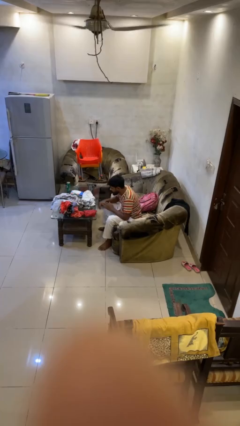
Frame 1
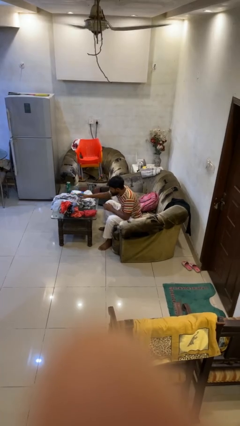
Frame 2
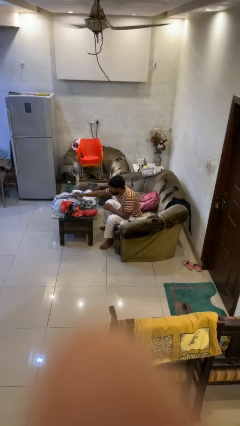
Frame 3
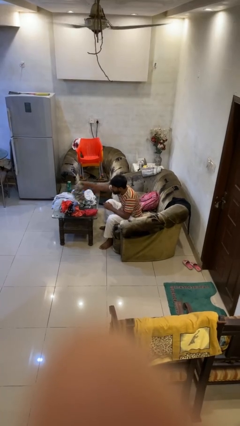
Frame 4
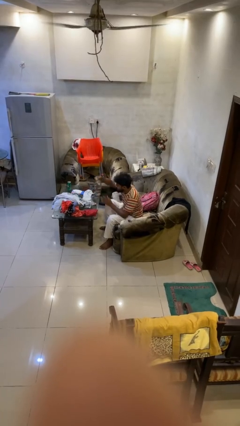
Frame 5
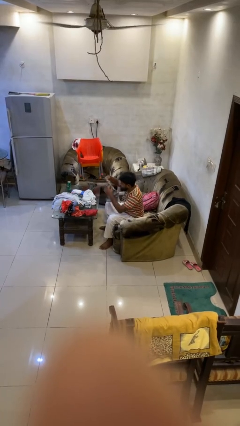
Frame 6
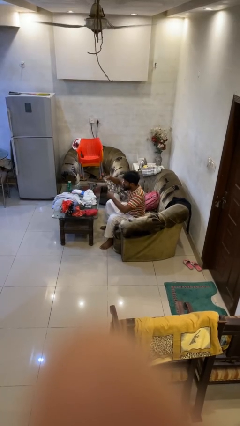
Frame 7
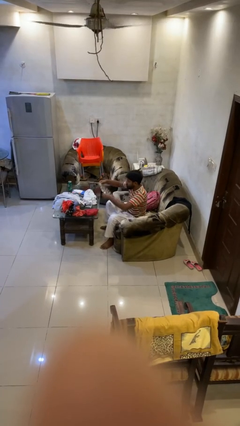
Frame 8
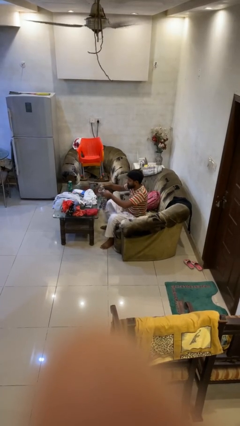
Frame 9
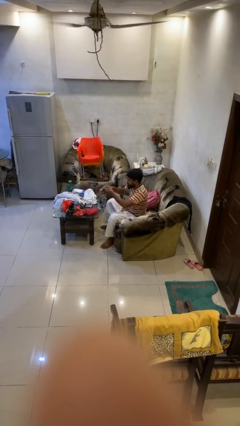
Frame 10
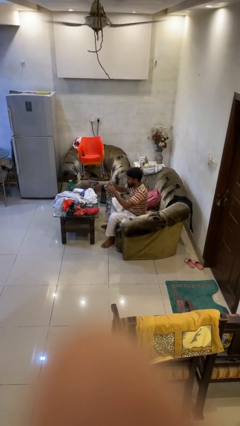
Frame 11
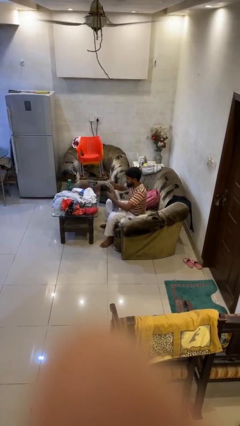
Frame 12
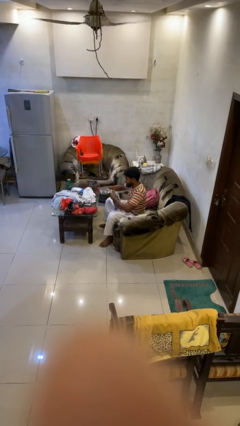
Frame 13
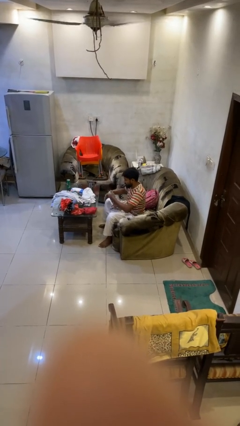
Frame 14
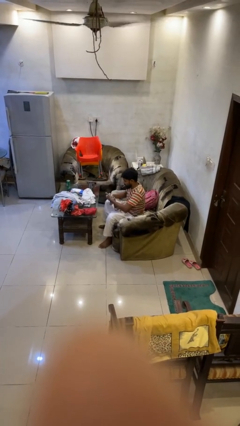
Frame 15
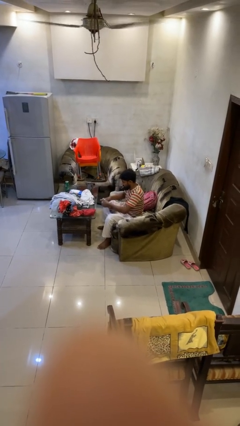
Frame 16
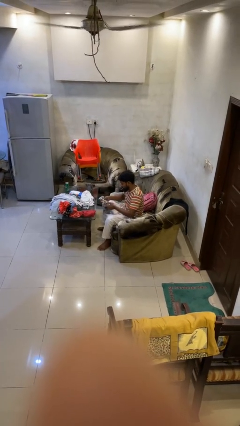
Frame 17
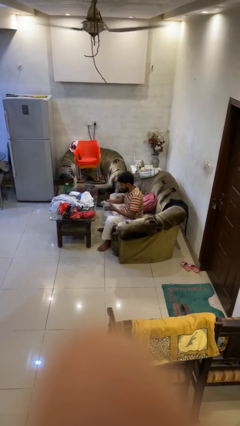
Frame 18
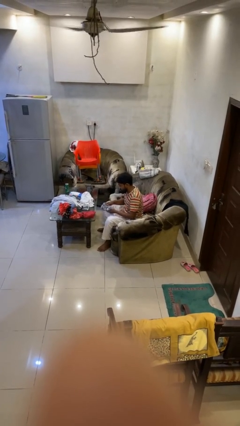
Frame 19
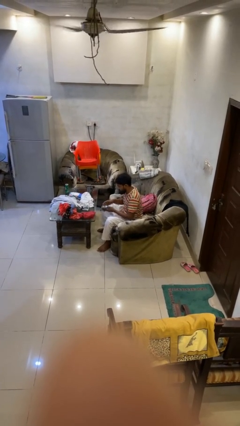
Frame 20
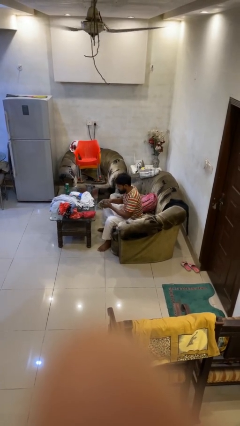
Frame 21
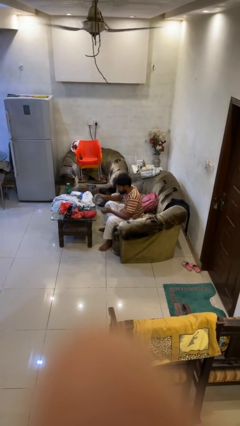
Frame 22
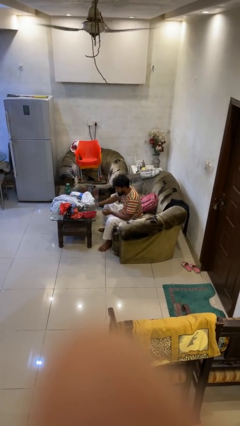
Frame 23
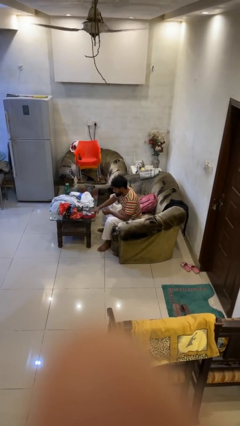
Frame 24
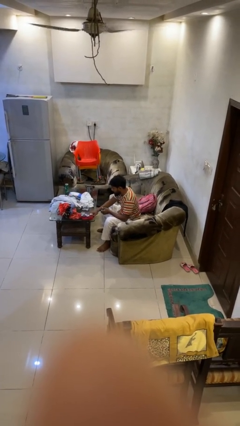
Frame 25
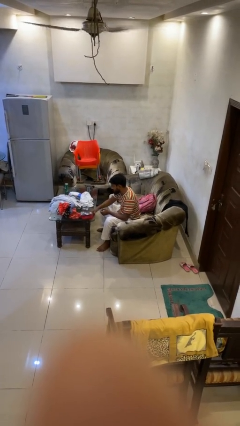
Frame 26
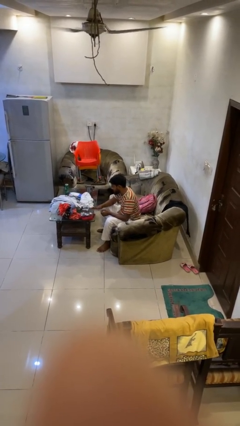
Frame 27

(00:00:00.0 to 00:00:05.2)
person folds pants

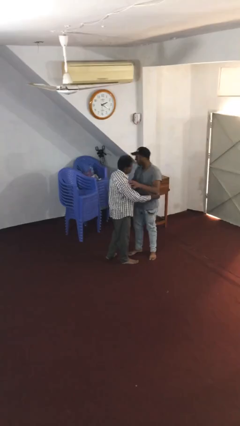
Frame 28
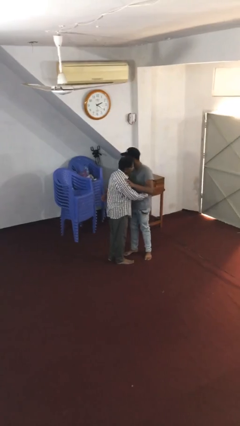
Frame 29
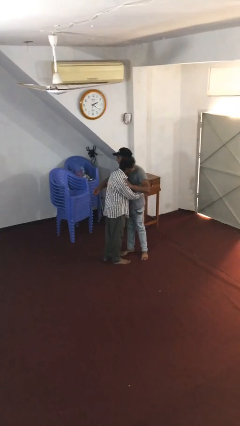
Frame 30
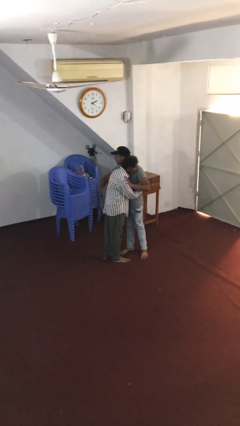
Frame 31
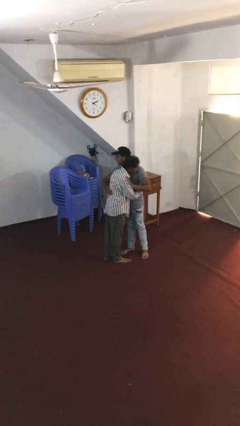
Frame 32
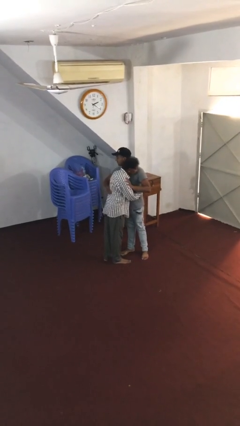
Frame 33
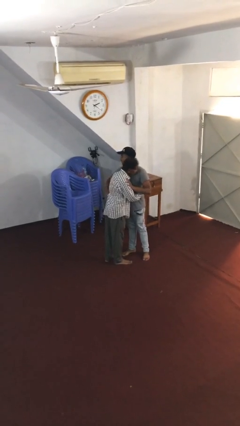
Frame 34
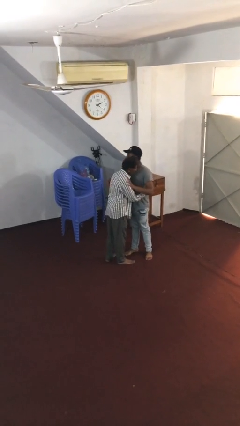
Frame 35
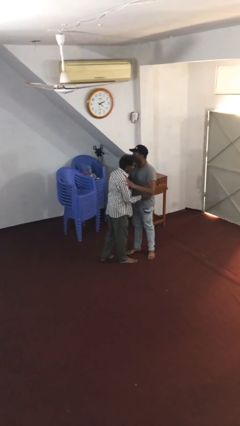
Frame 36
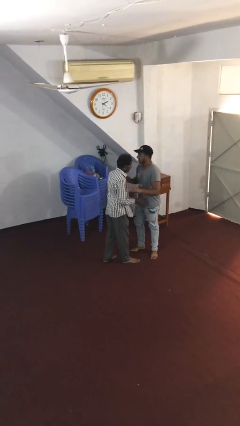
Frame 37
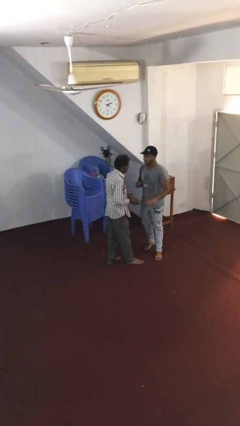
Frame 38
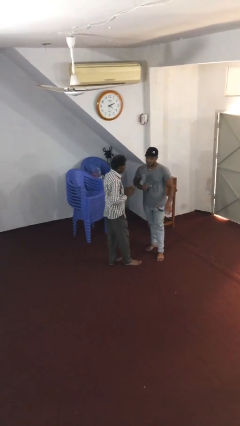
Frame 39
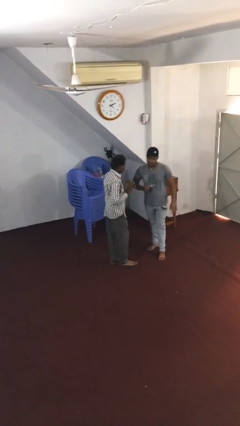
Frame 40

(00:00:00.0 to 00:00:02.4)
person embraces person

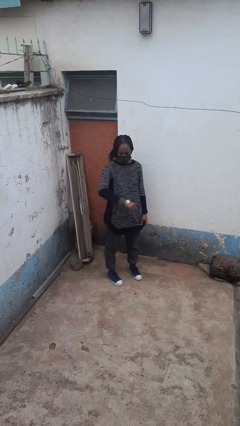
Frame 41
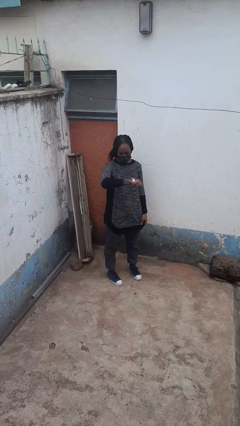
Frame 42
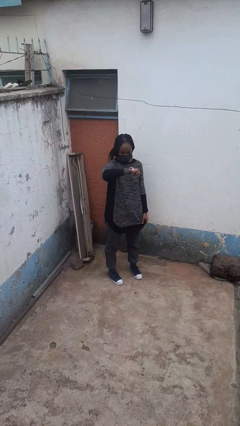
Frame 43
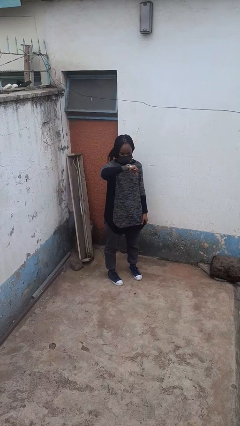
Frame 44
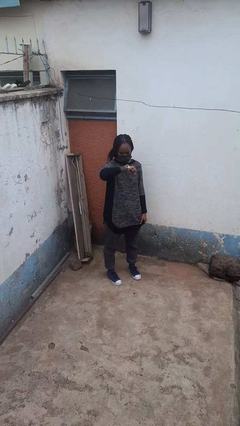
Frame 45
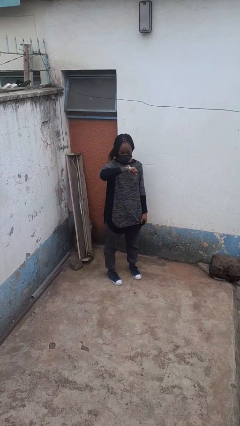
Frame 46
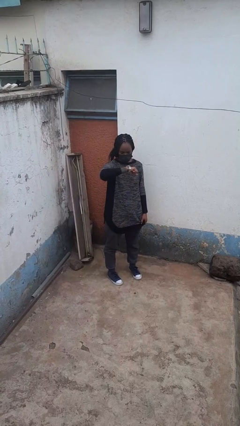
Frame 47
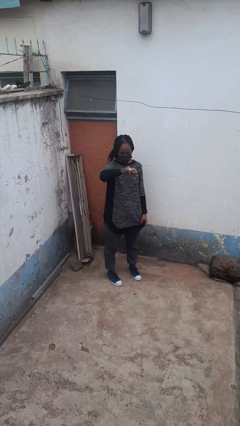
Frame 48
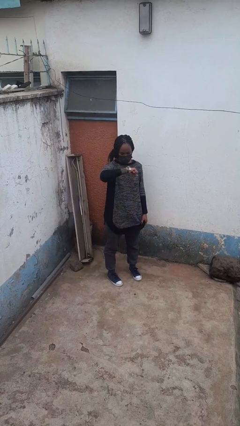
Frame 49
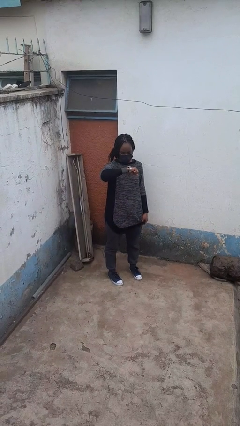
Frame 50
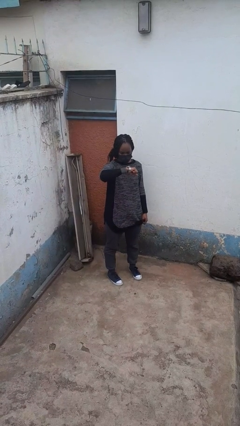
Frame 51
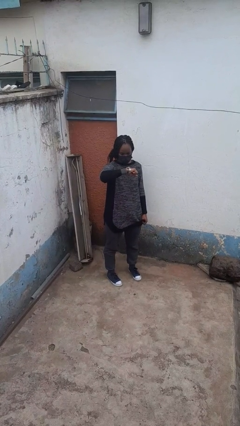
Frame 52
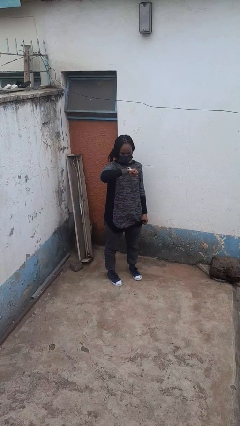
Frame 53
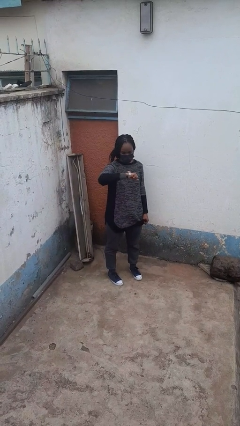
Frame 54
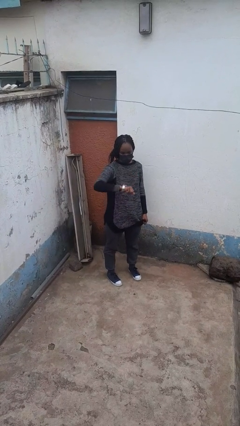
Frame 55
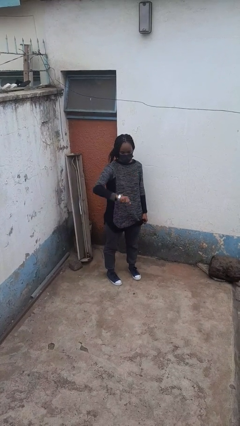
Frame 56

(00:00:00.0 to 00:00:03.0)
person looks at wristwatch

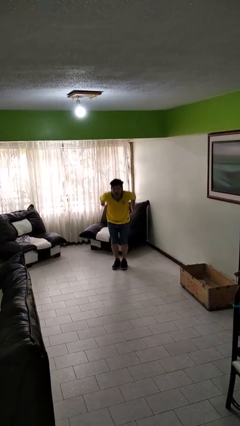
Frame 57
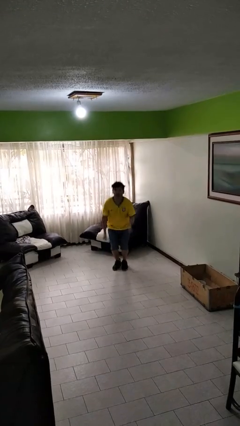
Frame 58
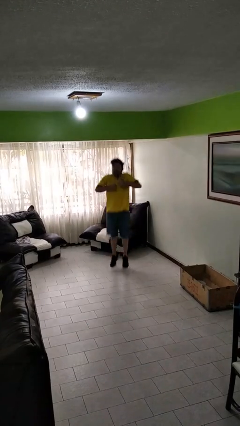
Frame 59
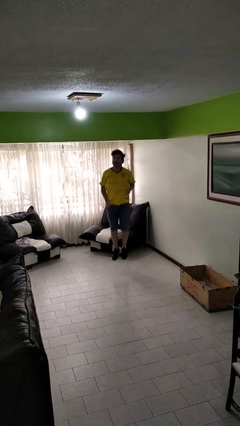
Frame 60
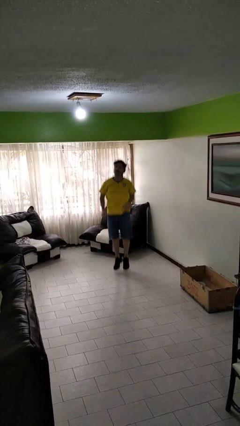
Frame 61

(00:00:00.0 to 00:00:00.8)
person jumps

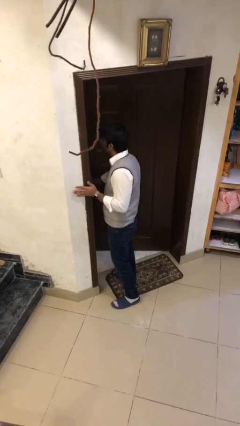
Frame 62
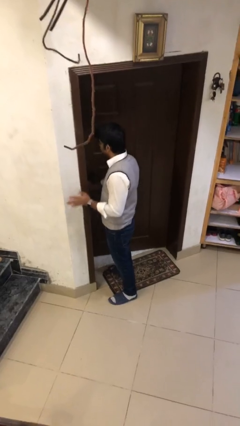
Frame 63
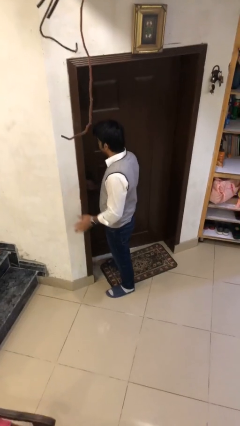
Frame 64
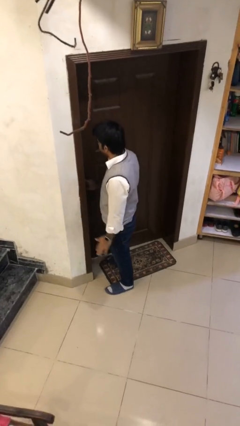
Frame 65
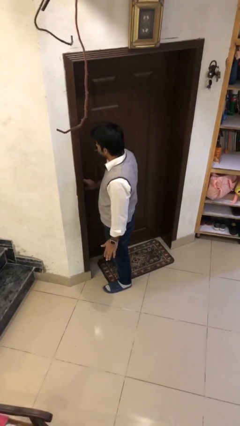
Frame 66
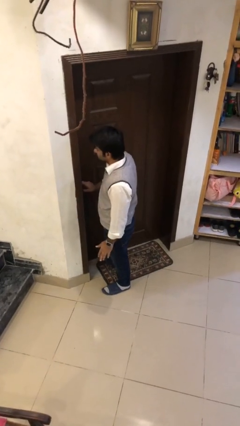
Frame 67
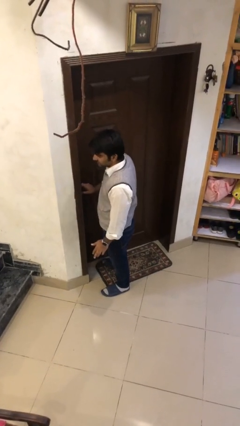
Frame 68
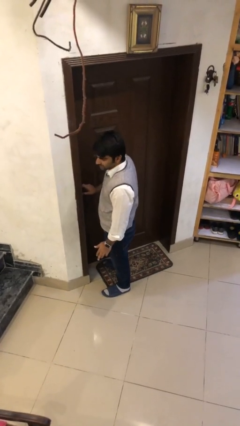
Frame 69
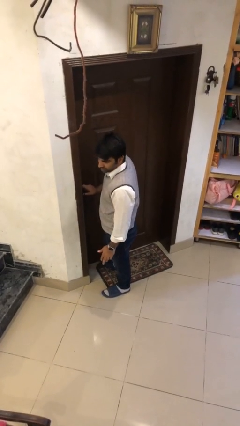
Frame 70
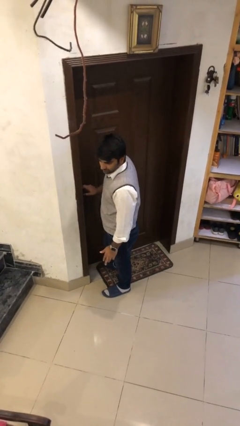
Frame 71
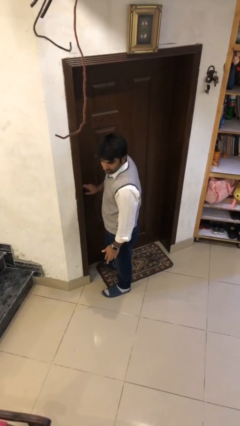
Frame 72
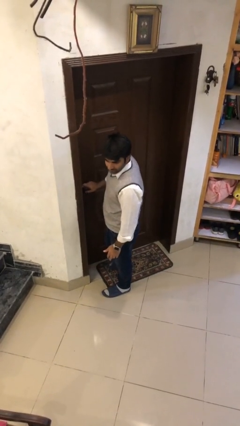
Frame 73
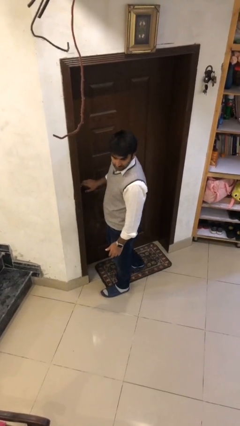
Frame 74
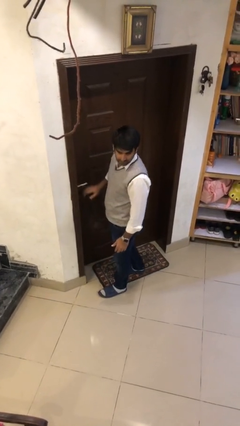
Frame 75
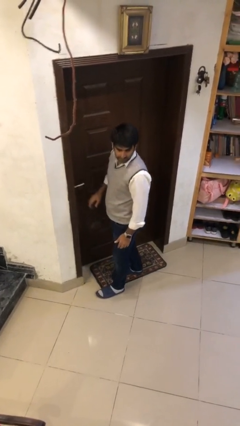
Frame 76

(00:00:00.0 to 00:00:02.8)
person closes facility door

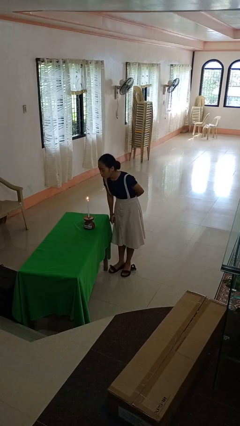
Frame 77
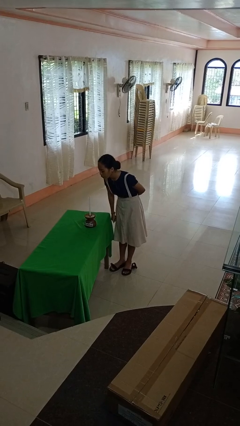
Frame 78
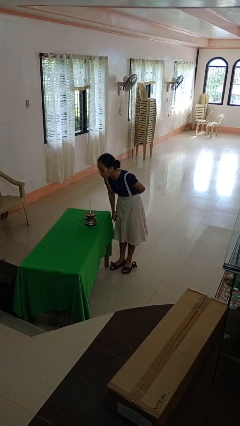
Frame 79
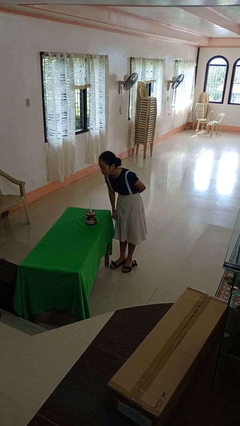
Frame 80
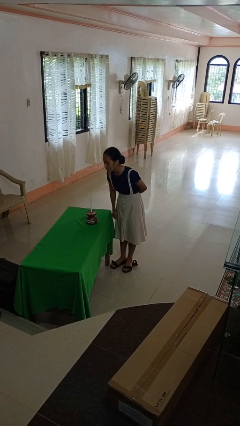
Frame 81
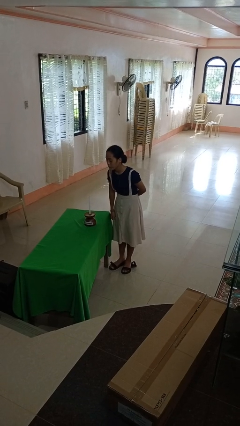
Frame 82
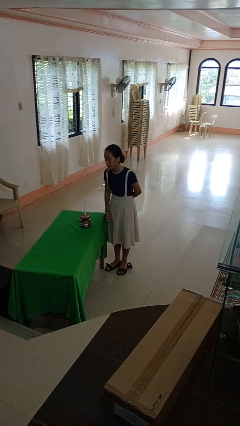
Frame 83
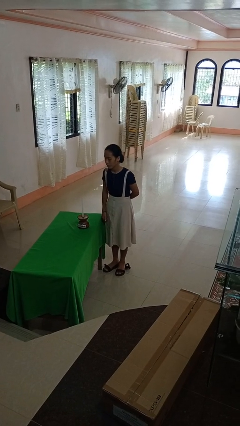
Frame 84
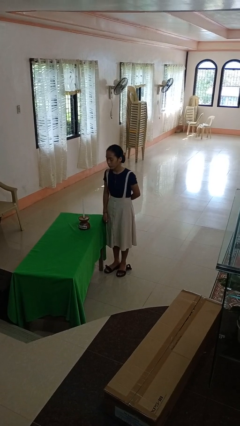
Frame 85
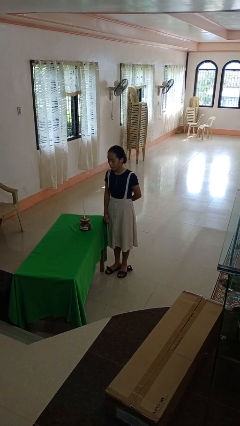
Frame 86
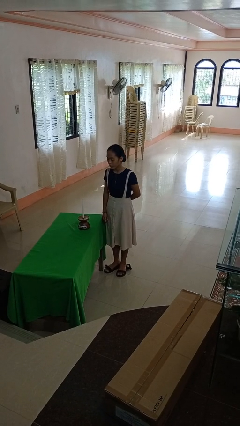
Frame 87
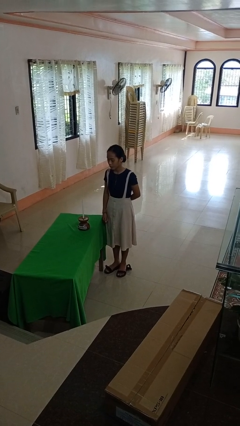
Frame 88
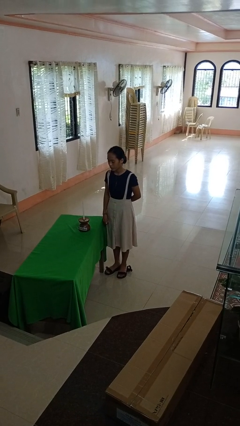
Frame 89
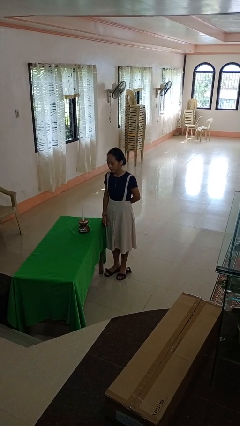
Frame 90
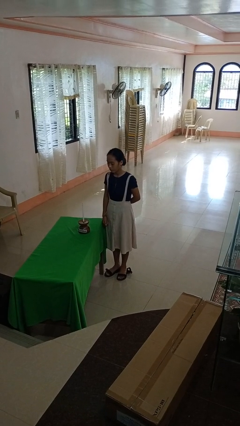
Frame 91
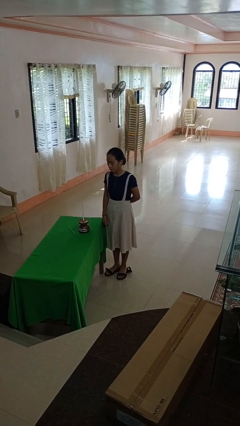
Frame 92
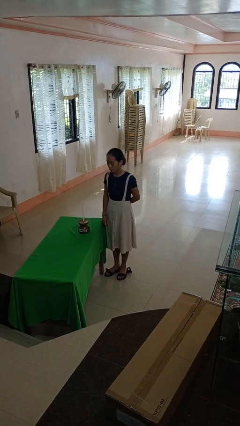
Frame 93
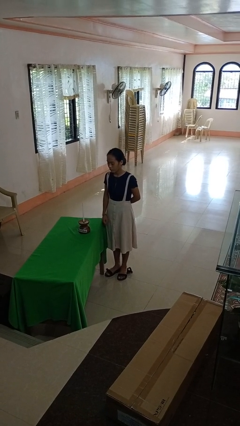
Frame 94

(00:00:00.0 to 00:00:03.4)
person extinguishes candle
